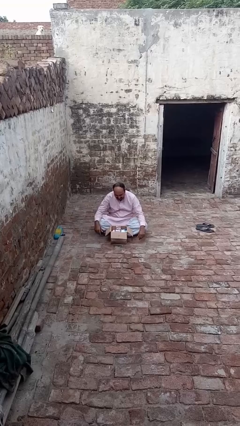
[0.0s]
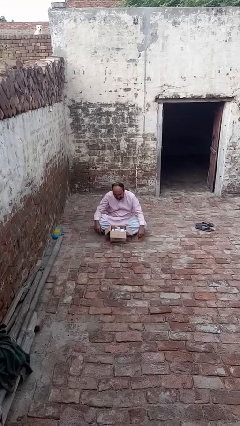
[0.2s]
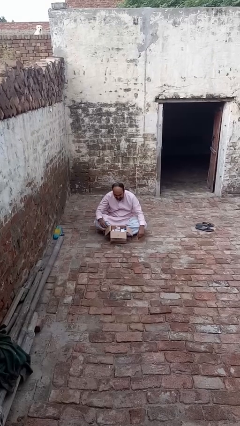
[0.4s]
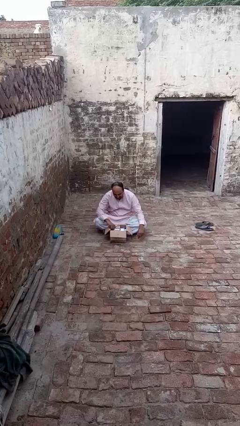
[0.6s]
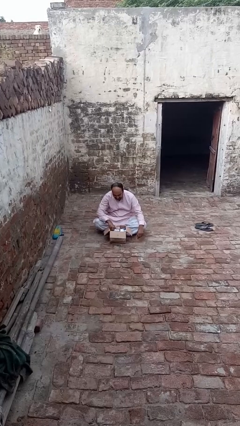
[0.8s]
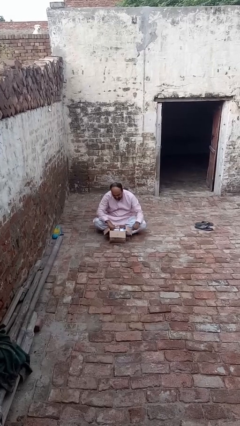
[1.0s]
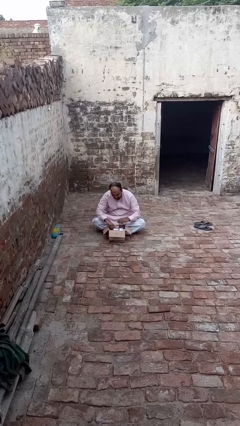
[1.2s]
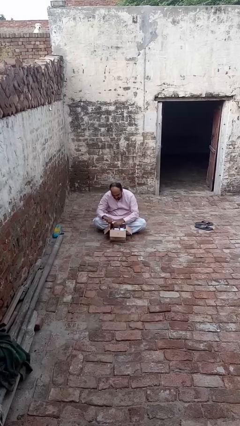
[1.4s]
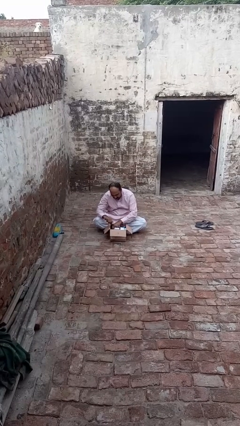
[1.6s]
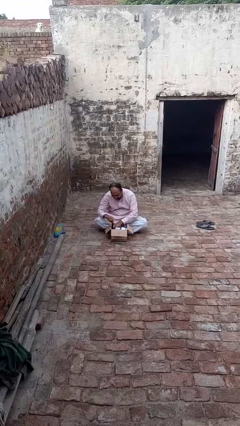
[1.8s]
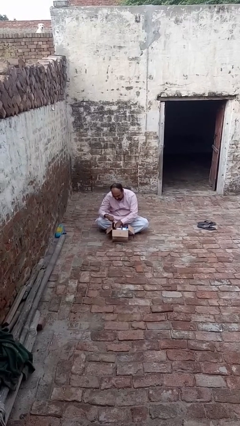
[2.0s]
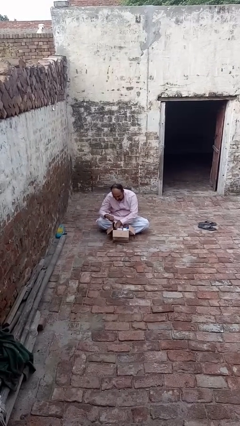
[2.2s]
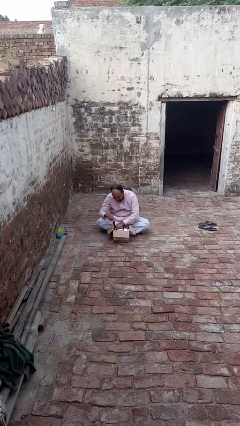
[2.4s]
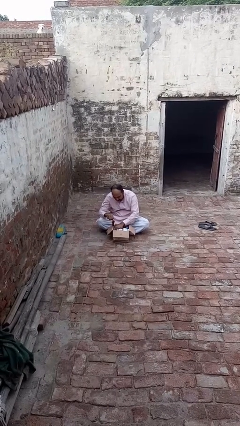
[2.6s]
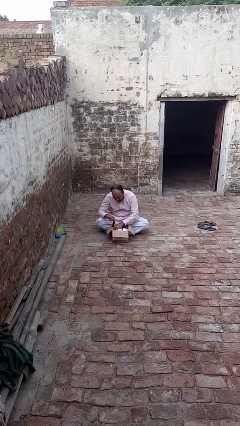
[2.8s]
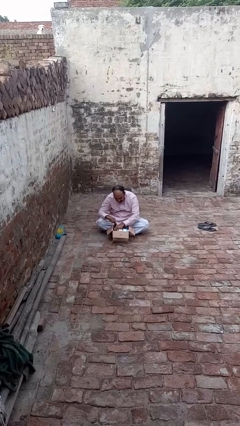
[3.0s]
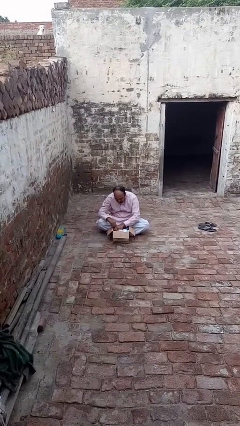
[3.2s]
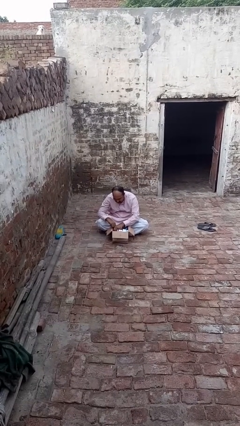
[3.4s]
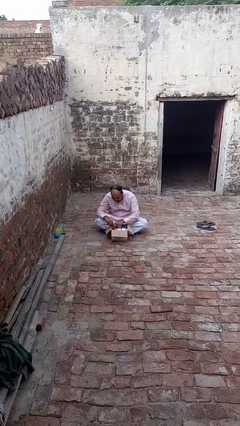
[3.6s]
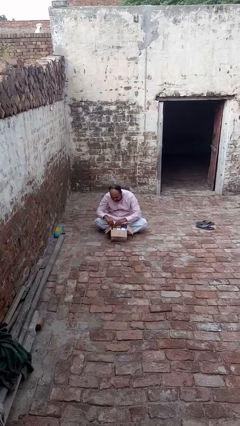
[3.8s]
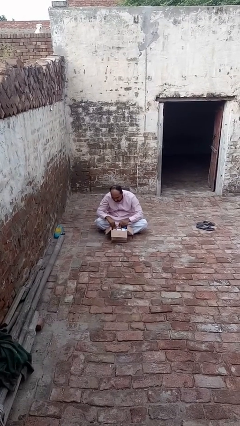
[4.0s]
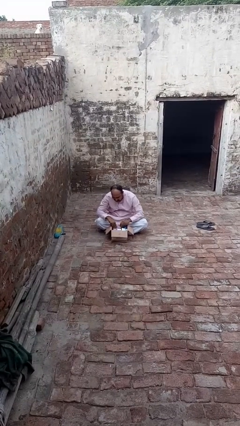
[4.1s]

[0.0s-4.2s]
person searches in box

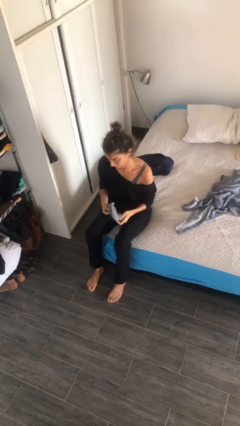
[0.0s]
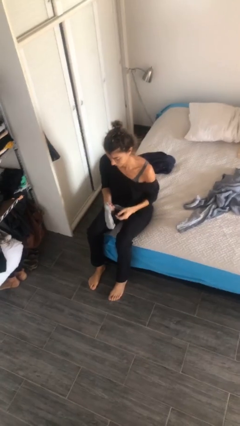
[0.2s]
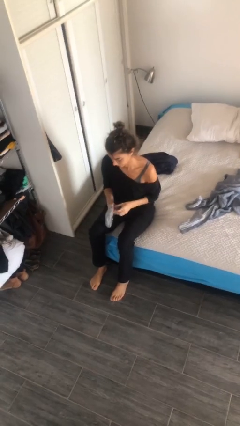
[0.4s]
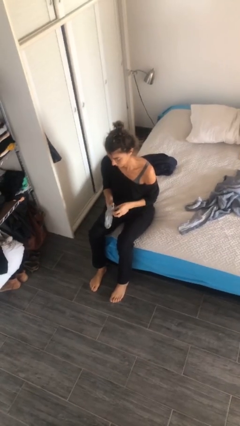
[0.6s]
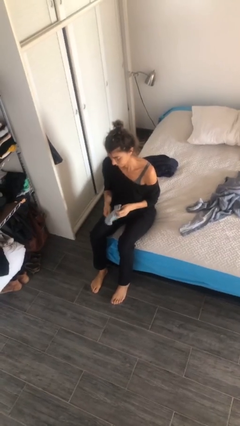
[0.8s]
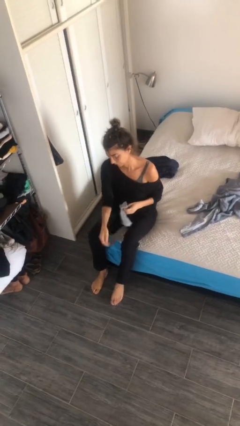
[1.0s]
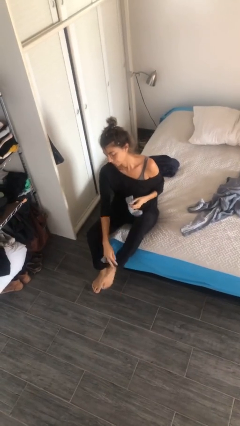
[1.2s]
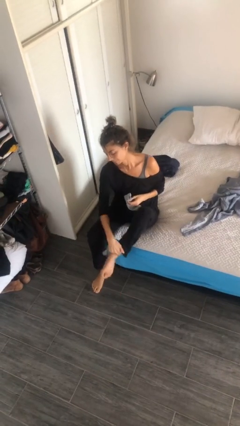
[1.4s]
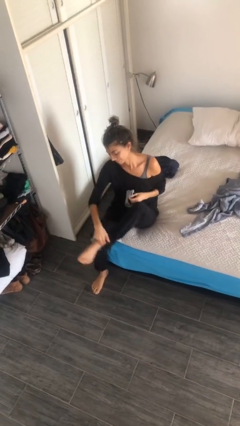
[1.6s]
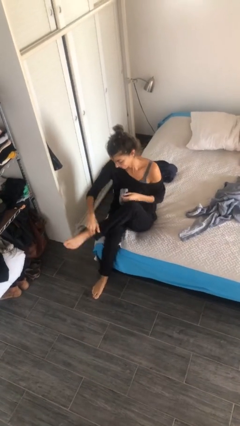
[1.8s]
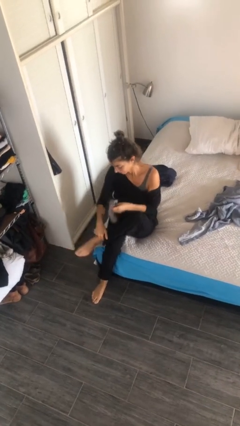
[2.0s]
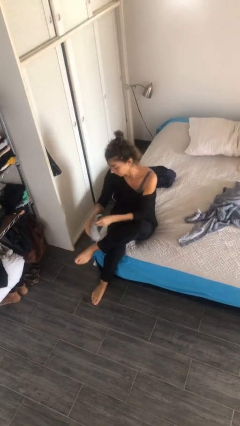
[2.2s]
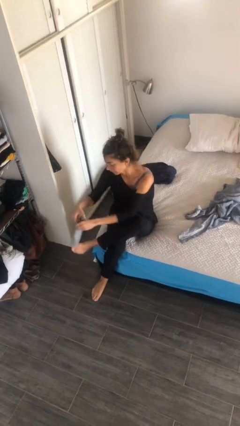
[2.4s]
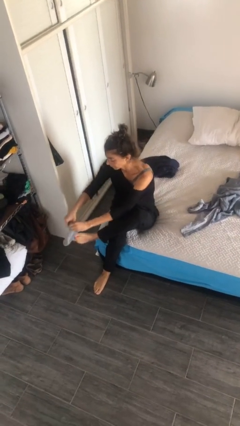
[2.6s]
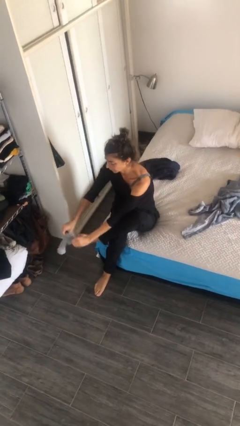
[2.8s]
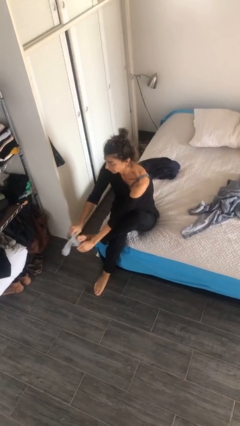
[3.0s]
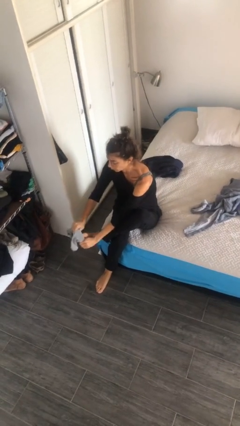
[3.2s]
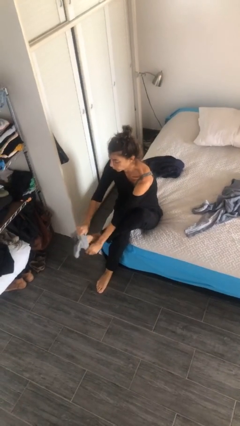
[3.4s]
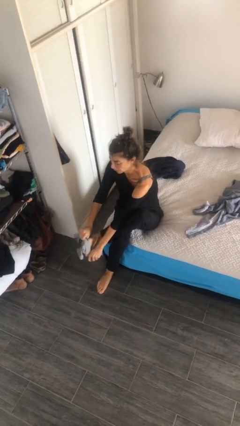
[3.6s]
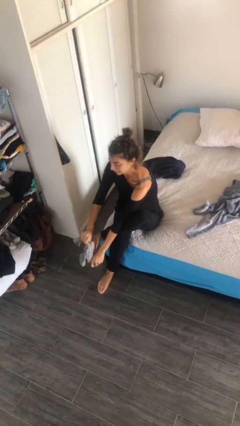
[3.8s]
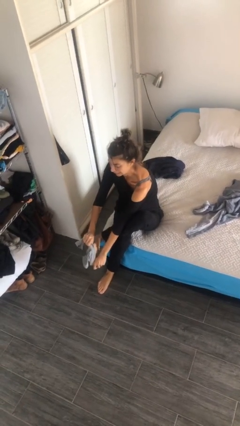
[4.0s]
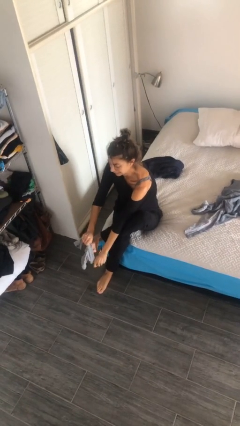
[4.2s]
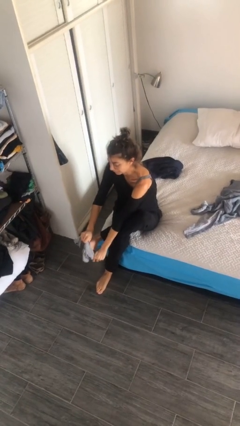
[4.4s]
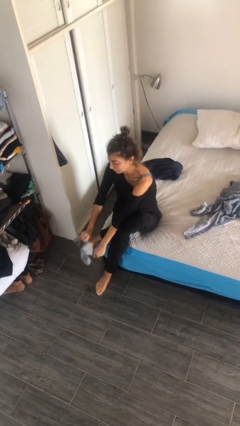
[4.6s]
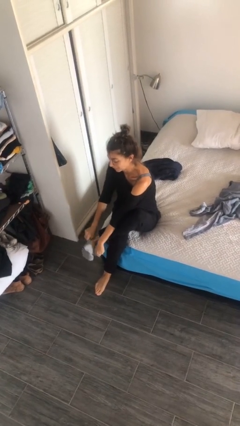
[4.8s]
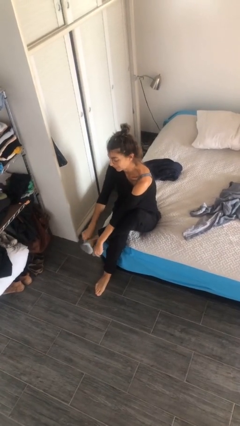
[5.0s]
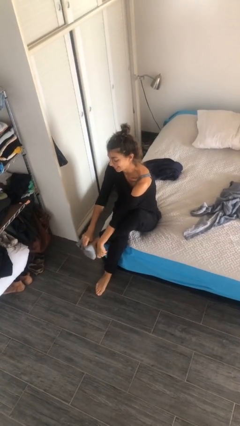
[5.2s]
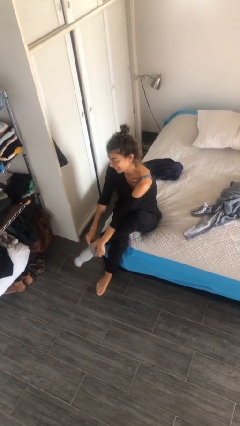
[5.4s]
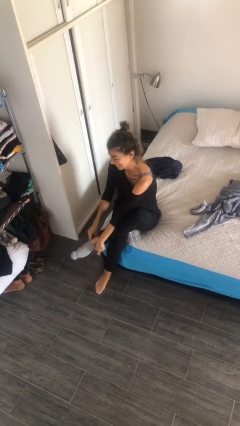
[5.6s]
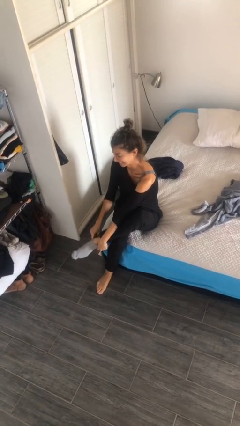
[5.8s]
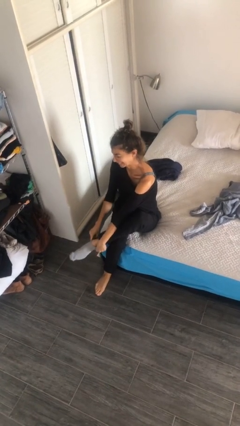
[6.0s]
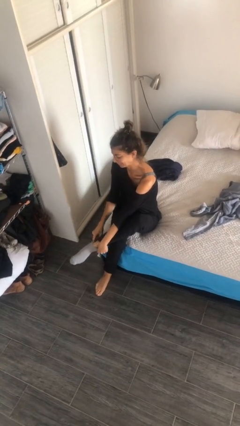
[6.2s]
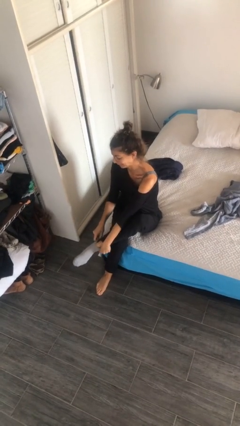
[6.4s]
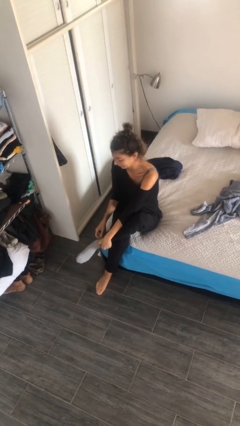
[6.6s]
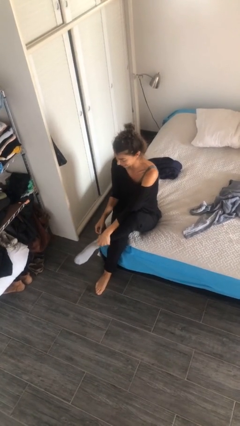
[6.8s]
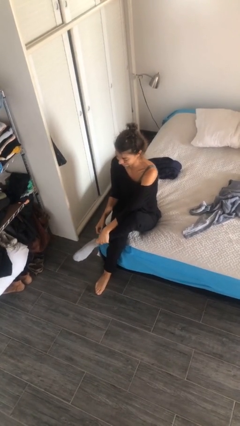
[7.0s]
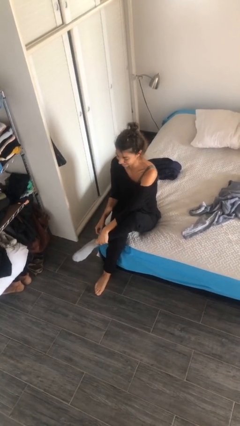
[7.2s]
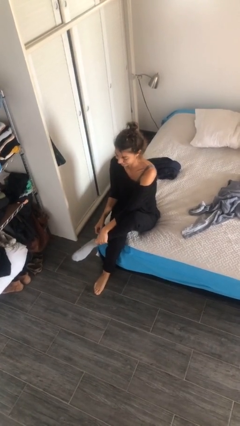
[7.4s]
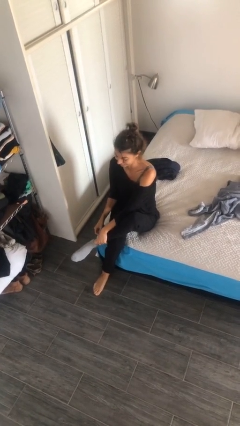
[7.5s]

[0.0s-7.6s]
person puts on socks

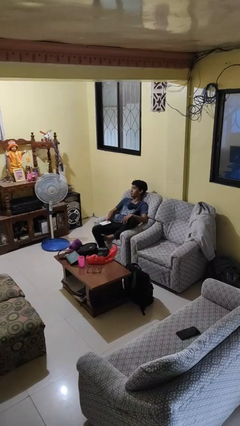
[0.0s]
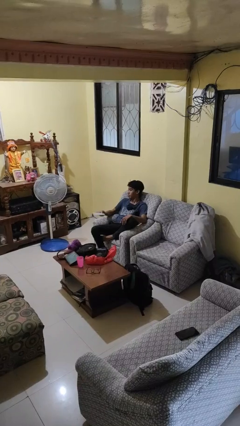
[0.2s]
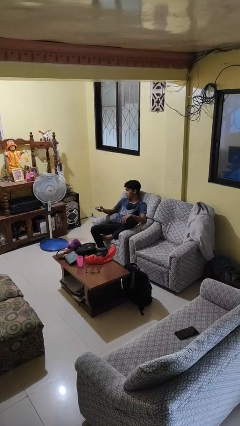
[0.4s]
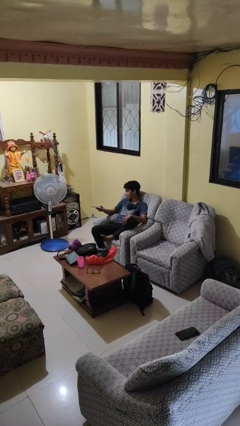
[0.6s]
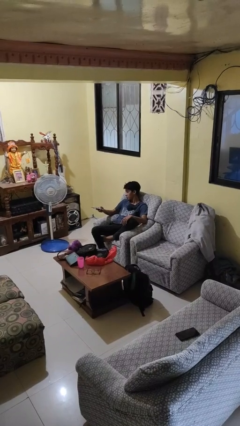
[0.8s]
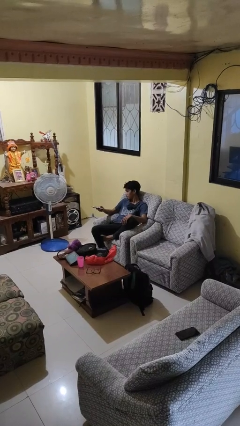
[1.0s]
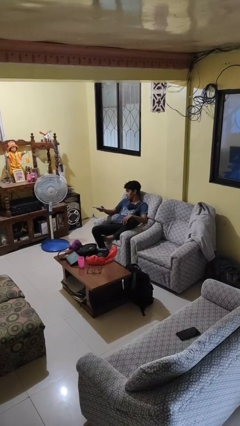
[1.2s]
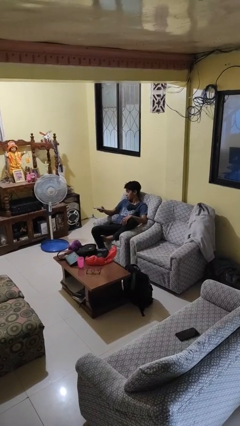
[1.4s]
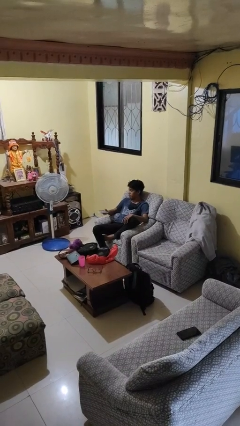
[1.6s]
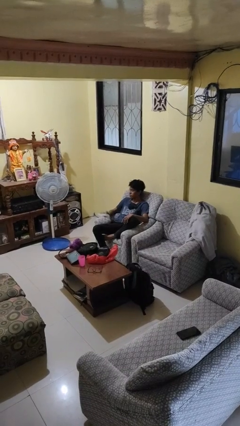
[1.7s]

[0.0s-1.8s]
person uses television remote

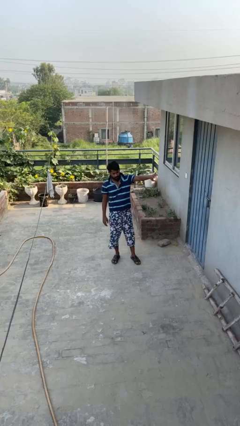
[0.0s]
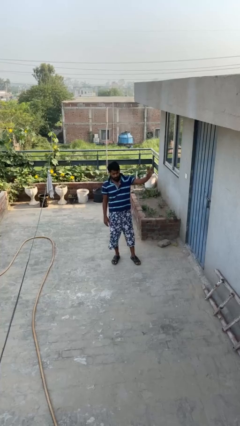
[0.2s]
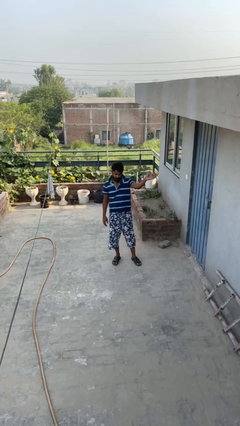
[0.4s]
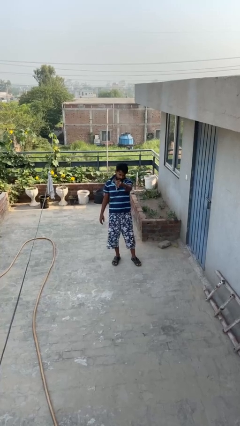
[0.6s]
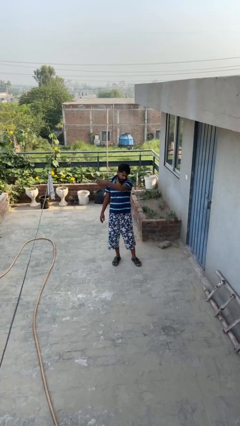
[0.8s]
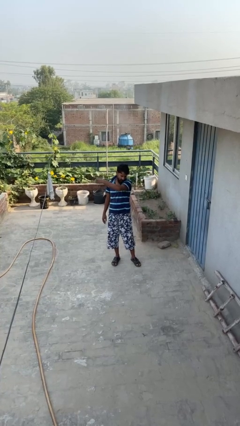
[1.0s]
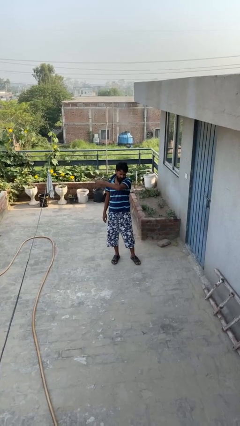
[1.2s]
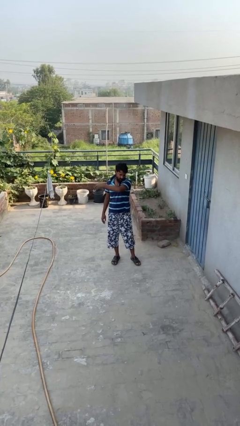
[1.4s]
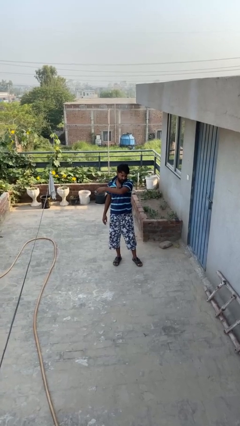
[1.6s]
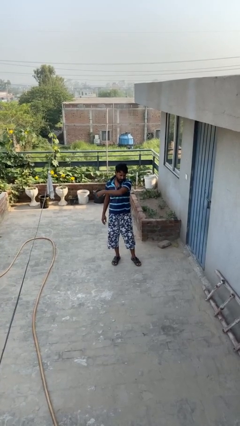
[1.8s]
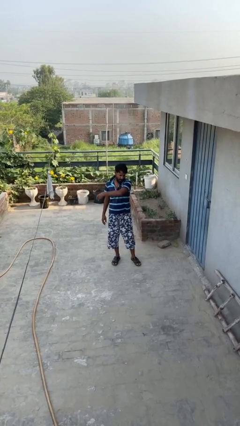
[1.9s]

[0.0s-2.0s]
person gestures swipe right

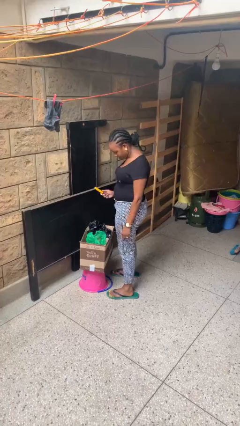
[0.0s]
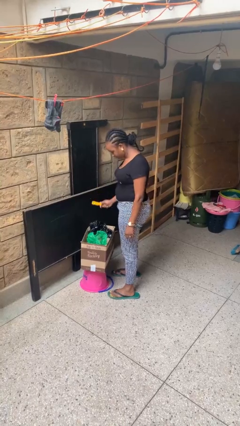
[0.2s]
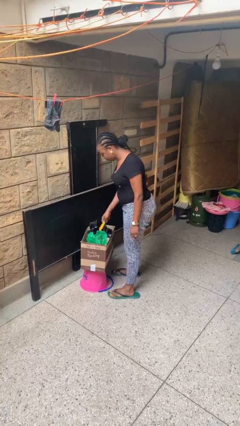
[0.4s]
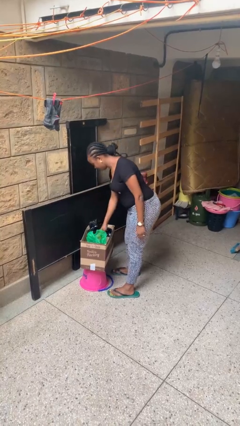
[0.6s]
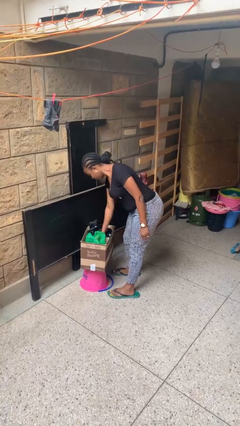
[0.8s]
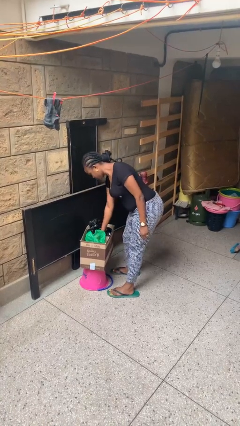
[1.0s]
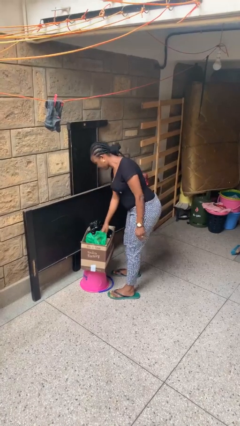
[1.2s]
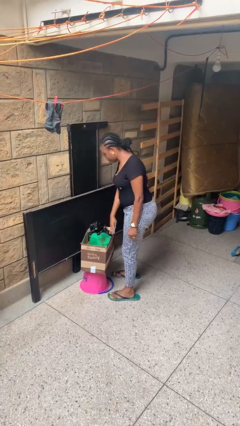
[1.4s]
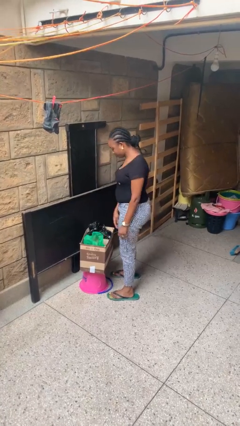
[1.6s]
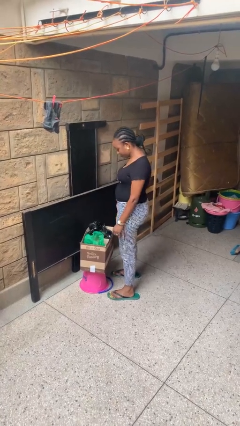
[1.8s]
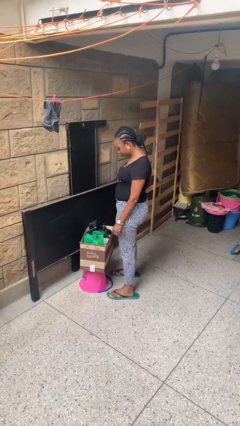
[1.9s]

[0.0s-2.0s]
person puts object into box
